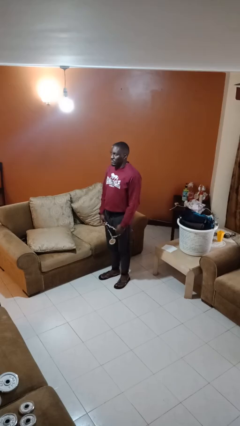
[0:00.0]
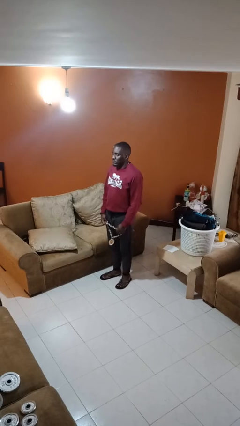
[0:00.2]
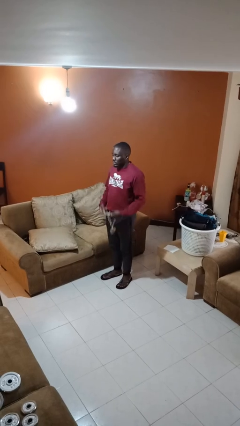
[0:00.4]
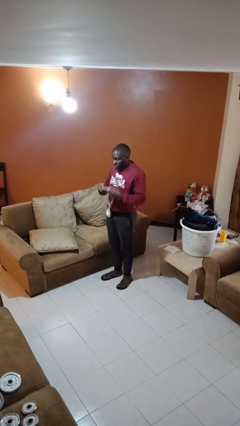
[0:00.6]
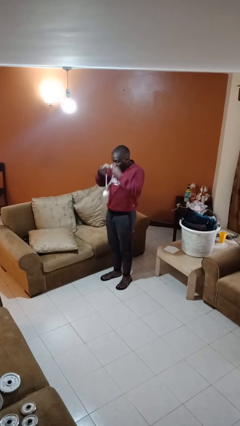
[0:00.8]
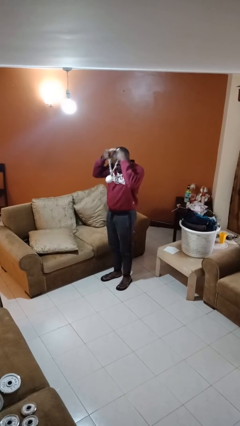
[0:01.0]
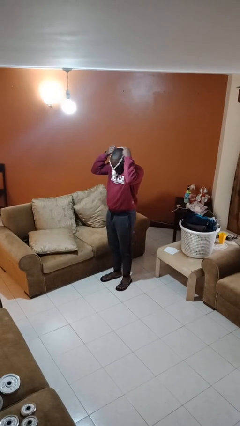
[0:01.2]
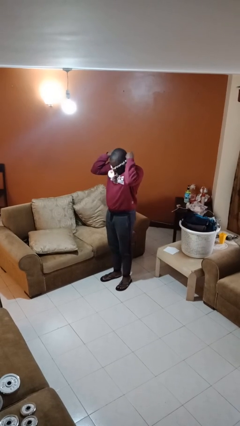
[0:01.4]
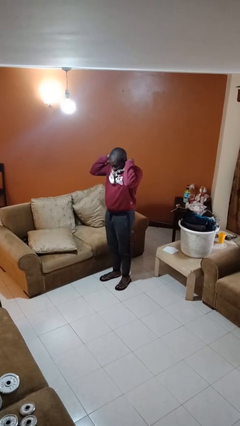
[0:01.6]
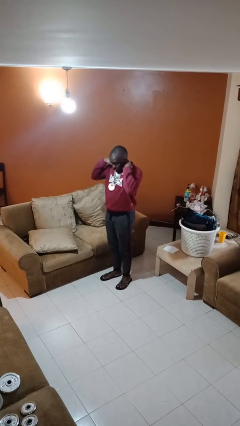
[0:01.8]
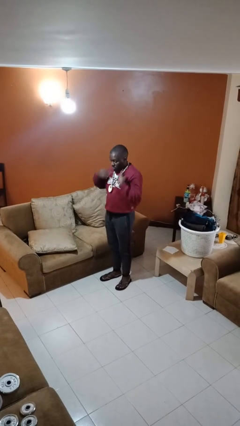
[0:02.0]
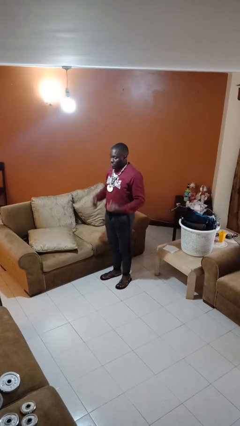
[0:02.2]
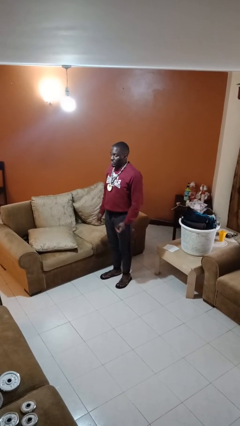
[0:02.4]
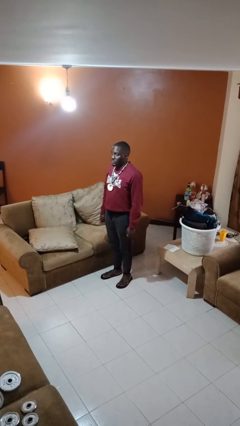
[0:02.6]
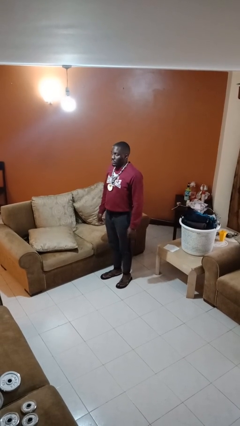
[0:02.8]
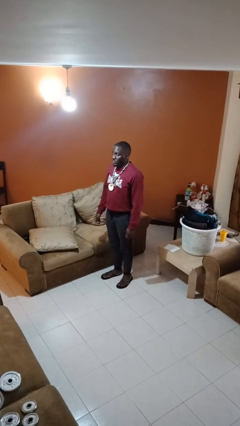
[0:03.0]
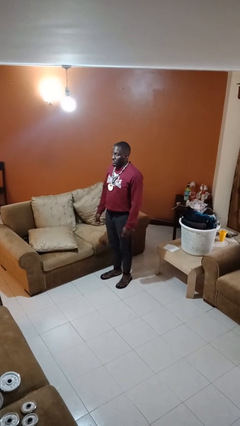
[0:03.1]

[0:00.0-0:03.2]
person puts on necklace

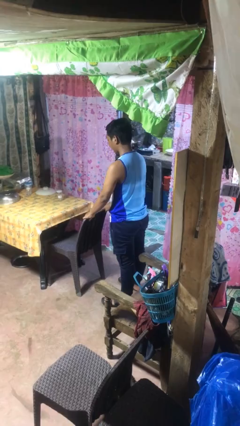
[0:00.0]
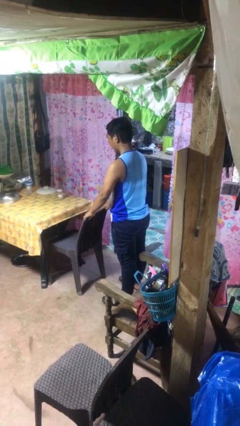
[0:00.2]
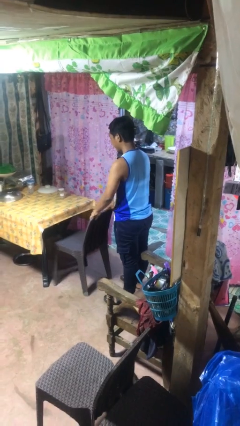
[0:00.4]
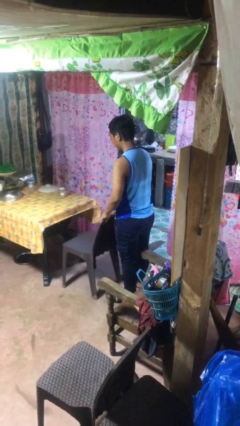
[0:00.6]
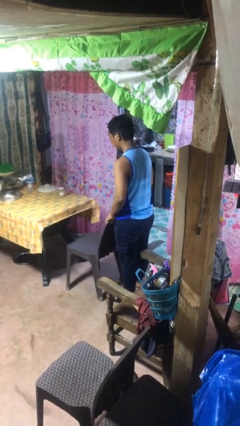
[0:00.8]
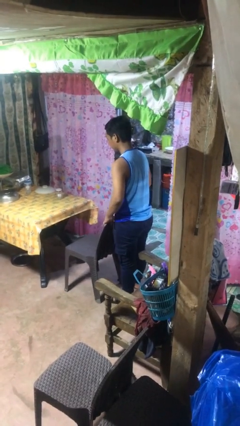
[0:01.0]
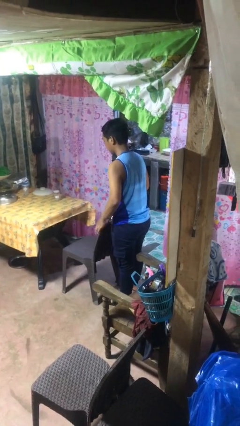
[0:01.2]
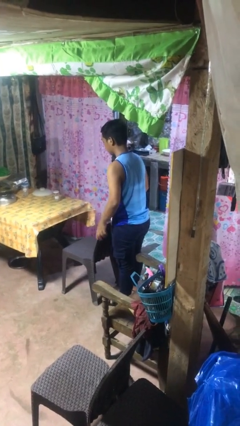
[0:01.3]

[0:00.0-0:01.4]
person pulls out chair

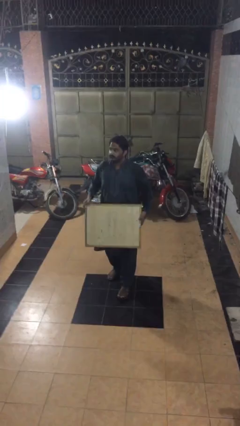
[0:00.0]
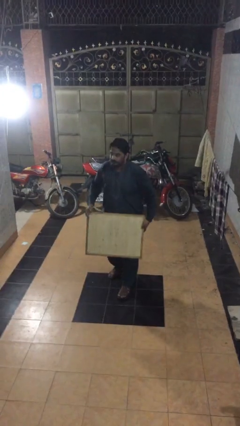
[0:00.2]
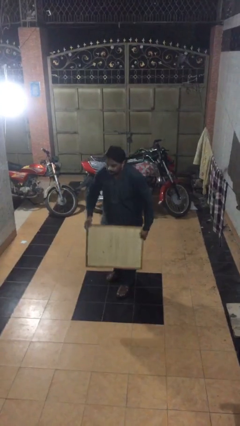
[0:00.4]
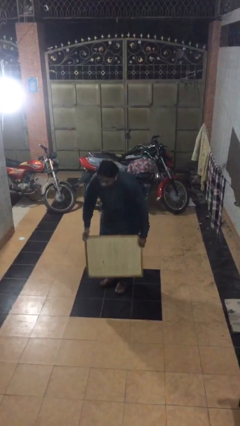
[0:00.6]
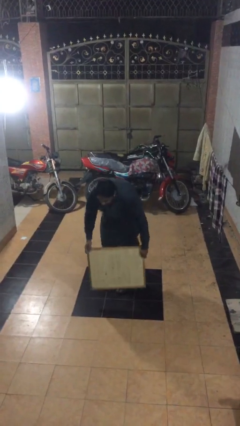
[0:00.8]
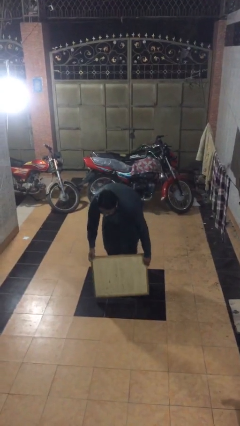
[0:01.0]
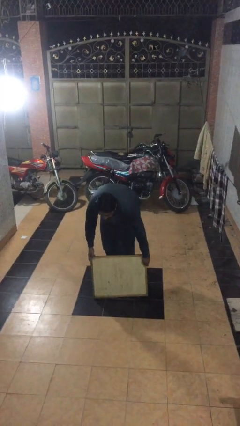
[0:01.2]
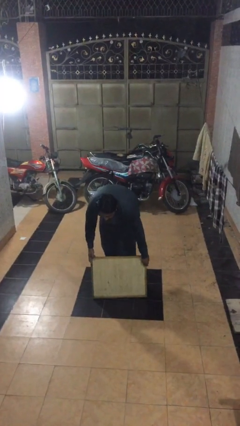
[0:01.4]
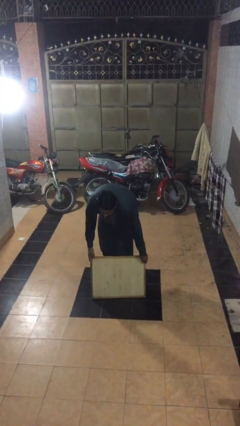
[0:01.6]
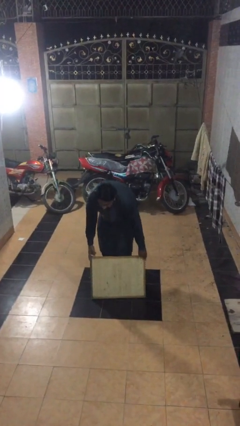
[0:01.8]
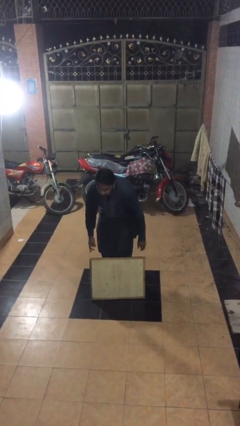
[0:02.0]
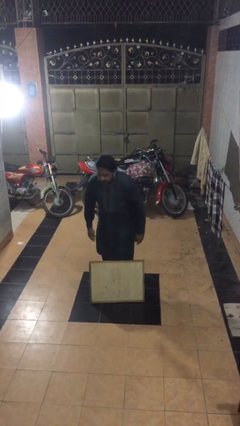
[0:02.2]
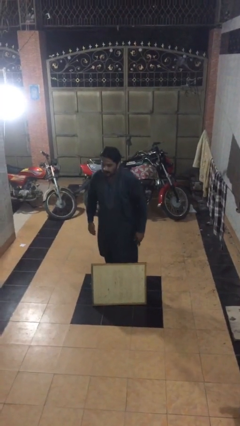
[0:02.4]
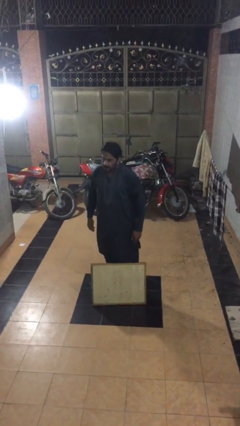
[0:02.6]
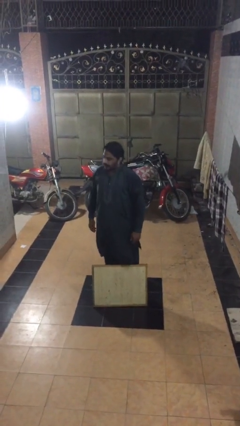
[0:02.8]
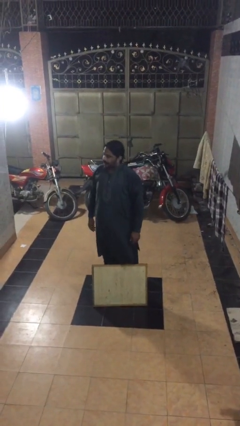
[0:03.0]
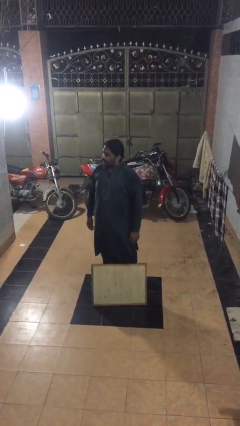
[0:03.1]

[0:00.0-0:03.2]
person puts down object on floor

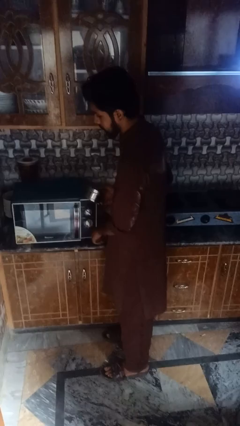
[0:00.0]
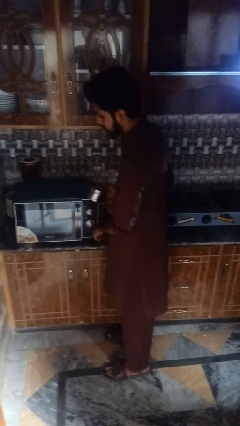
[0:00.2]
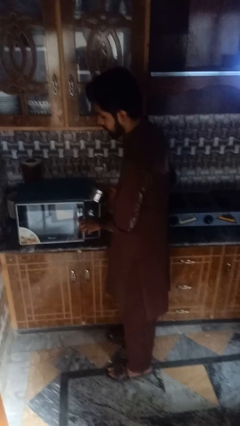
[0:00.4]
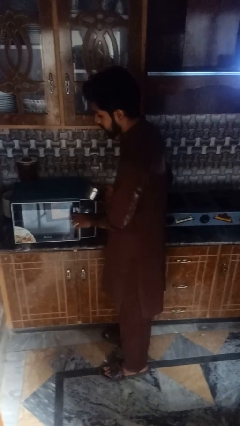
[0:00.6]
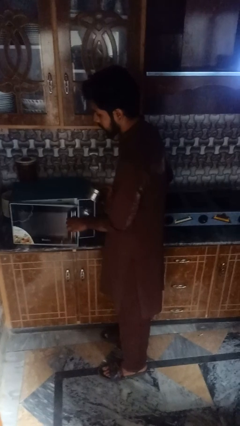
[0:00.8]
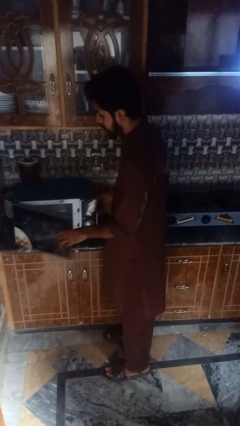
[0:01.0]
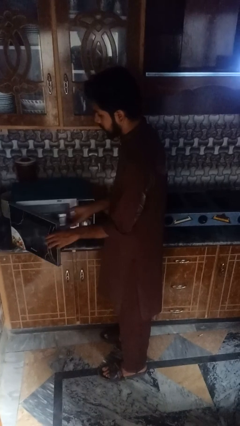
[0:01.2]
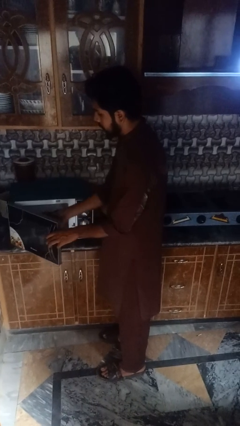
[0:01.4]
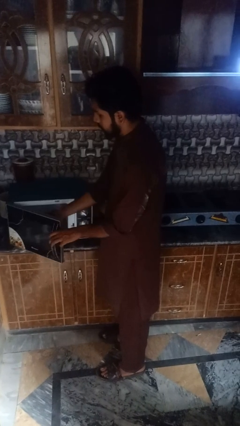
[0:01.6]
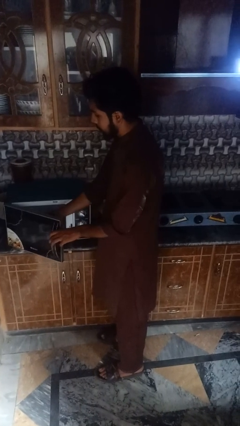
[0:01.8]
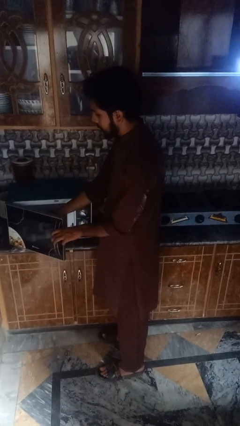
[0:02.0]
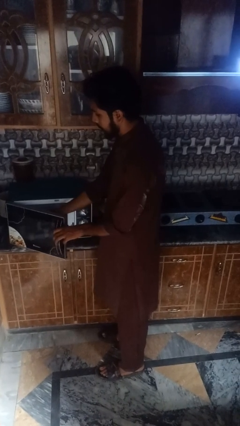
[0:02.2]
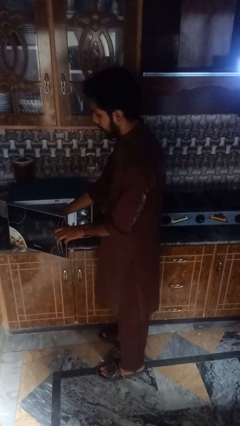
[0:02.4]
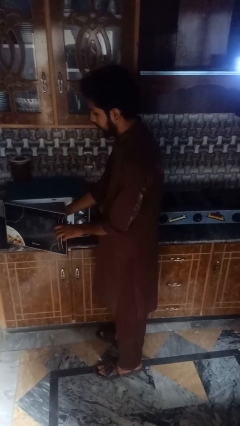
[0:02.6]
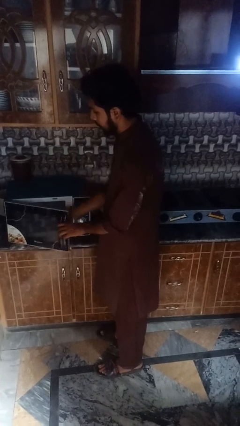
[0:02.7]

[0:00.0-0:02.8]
person puts object into microwave

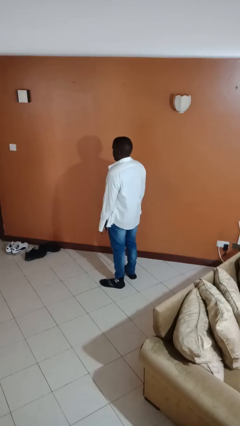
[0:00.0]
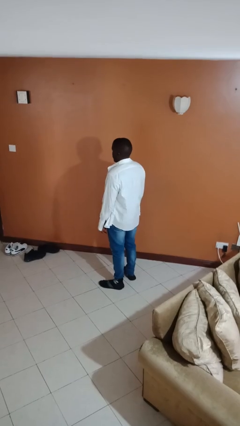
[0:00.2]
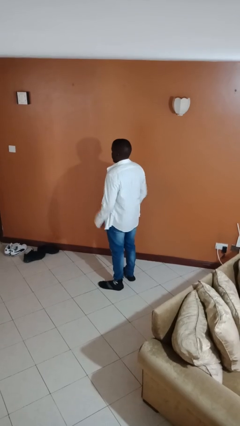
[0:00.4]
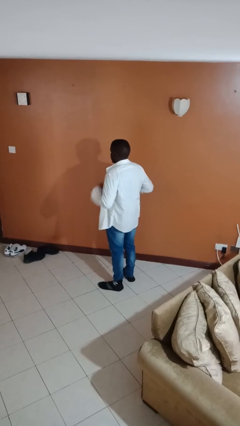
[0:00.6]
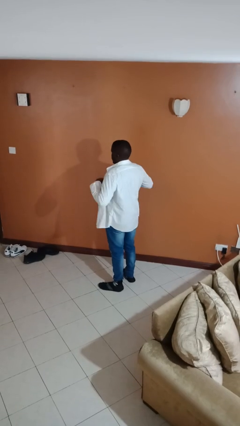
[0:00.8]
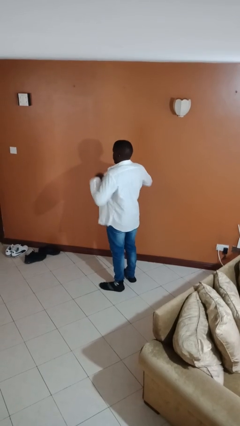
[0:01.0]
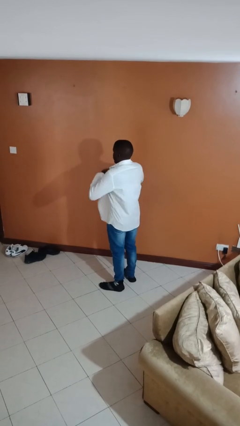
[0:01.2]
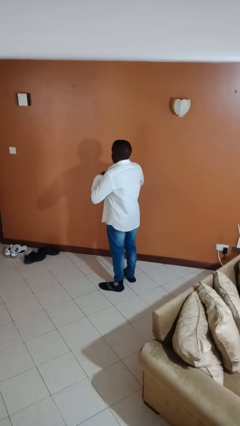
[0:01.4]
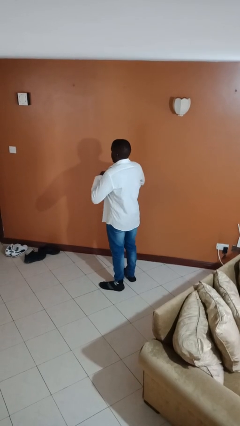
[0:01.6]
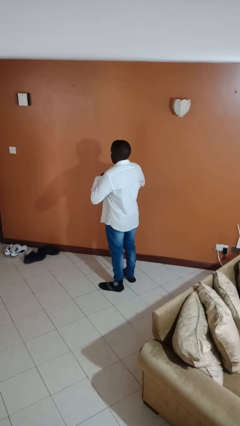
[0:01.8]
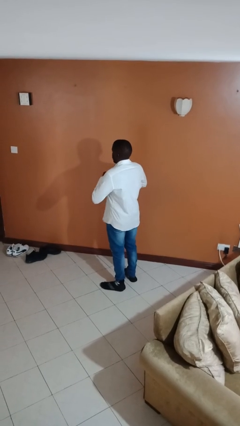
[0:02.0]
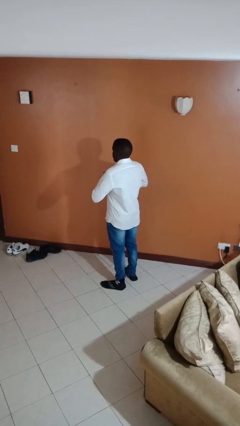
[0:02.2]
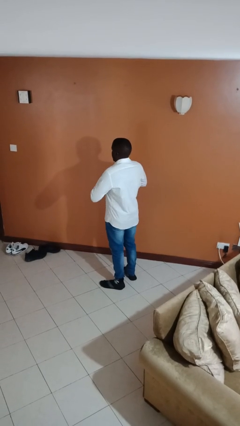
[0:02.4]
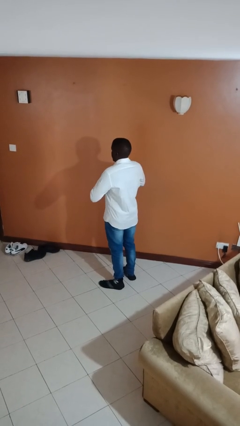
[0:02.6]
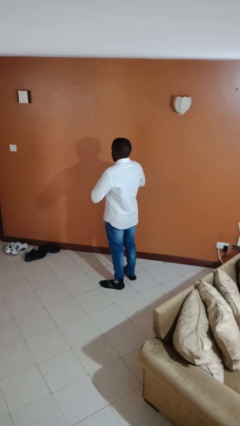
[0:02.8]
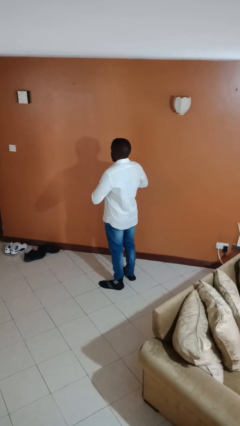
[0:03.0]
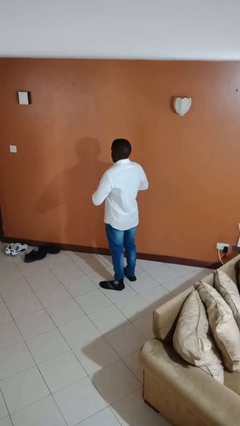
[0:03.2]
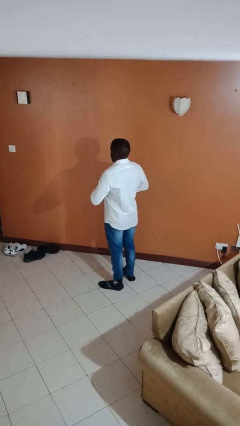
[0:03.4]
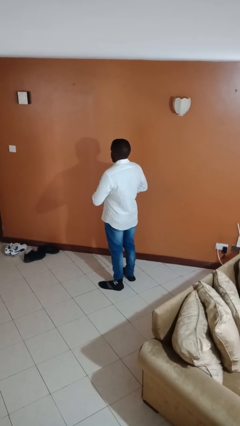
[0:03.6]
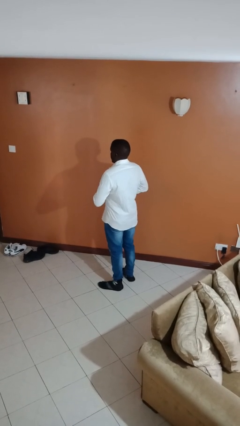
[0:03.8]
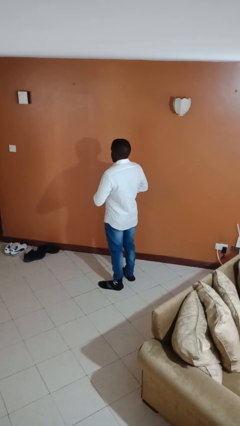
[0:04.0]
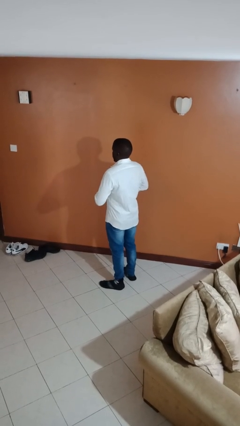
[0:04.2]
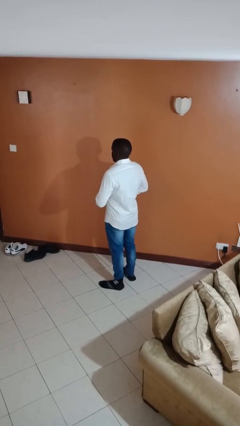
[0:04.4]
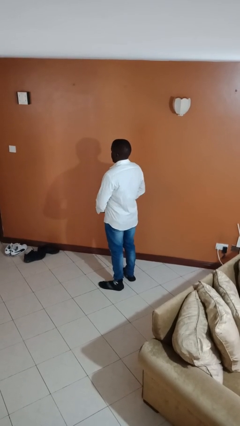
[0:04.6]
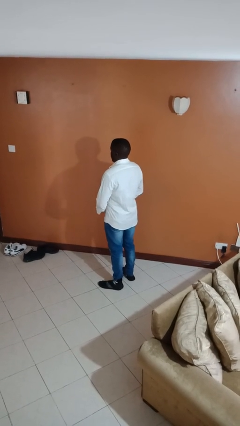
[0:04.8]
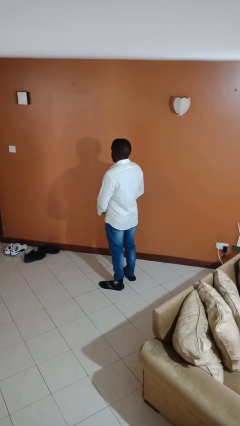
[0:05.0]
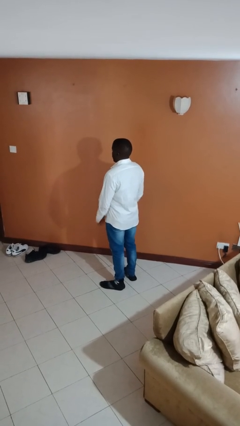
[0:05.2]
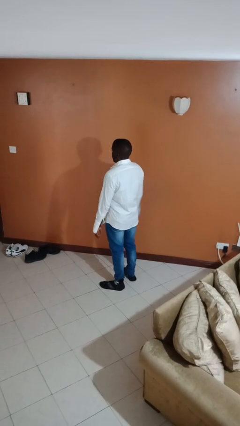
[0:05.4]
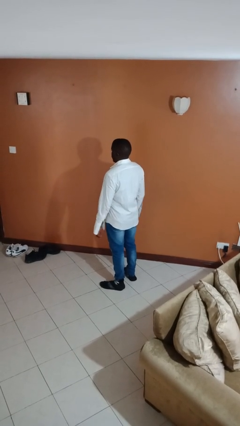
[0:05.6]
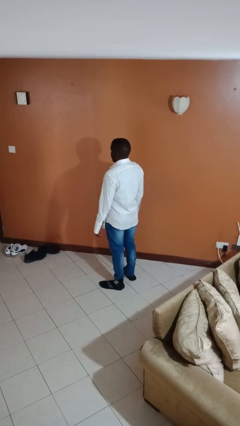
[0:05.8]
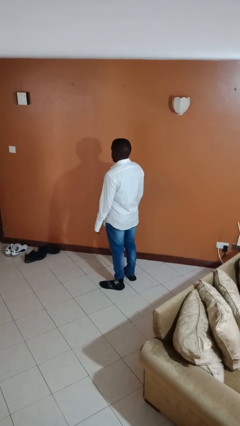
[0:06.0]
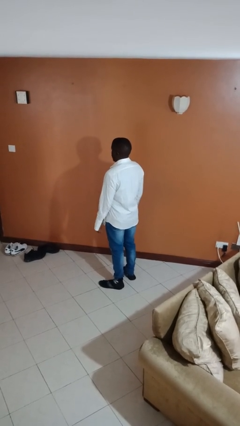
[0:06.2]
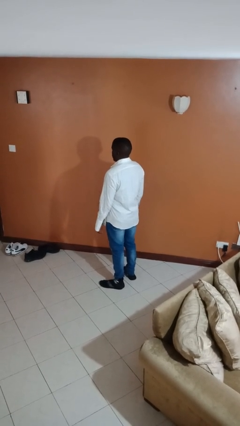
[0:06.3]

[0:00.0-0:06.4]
person buttons shirt

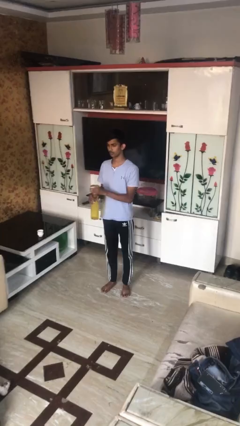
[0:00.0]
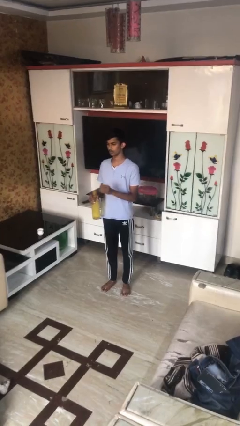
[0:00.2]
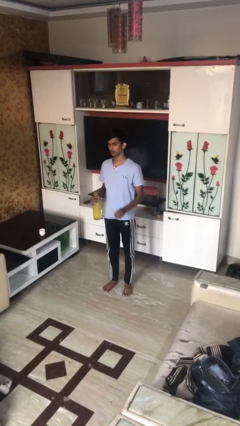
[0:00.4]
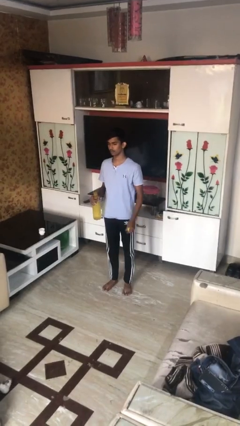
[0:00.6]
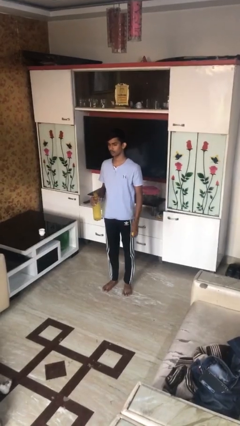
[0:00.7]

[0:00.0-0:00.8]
person unscrews lid from bottle
